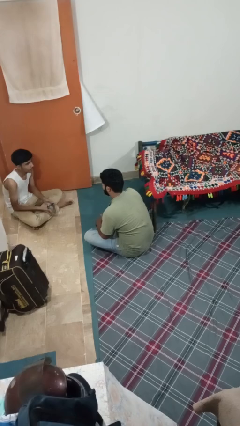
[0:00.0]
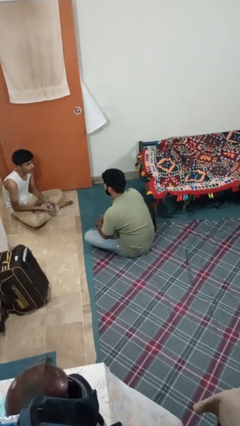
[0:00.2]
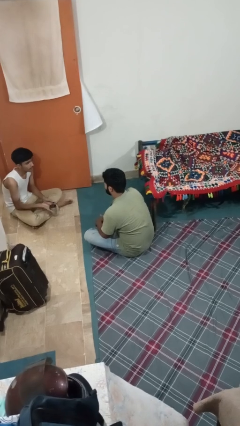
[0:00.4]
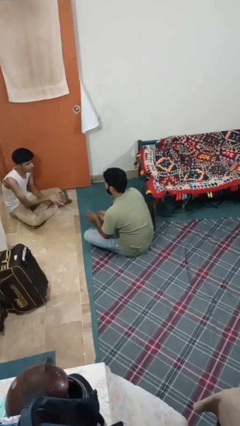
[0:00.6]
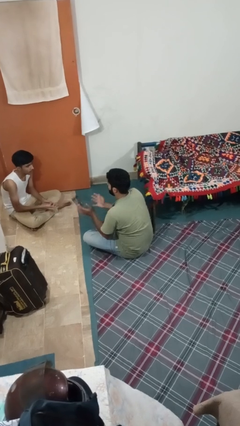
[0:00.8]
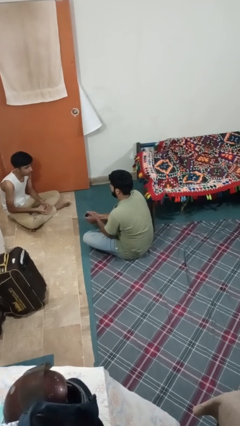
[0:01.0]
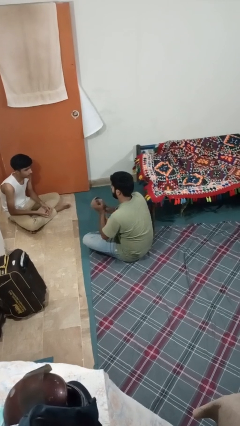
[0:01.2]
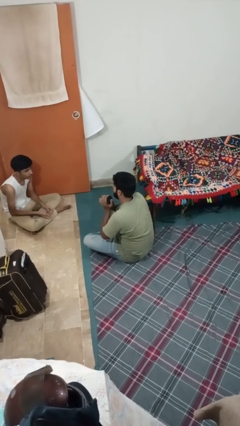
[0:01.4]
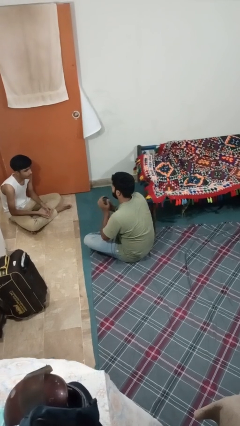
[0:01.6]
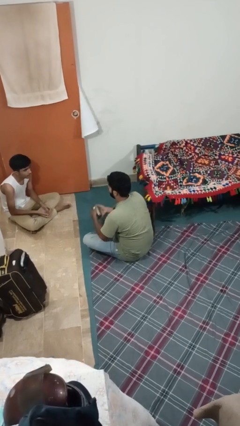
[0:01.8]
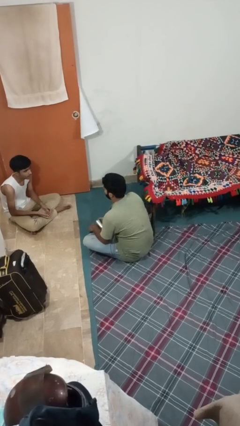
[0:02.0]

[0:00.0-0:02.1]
person catches object from person

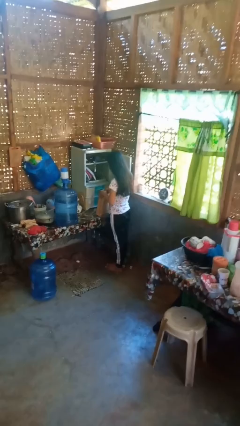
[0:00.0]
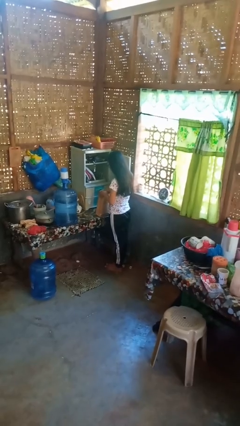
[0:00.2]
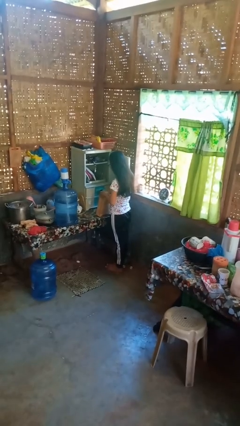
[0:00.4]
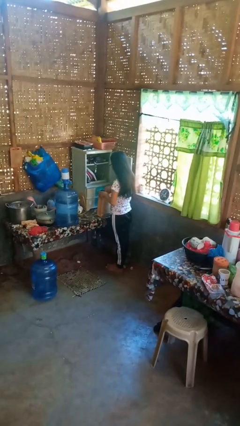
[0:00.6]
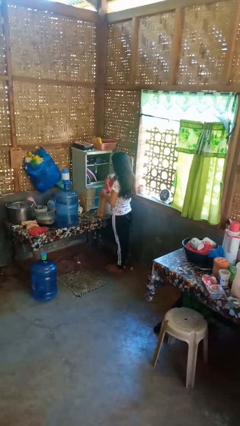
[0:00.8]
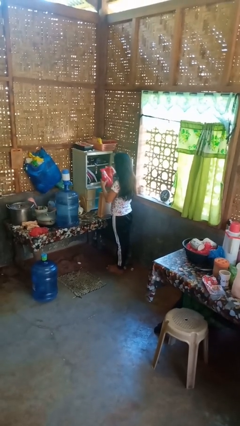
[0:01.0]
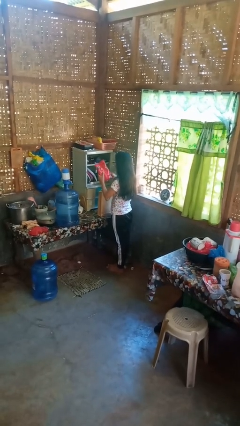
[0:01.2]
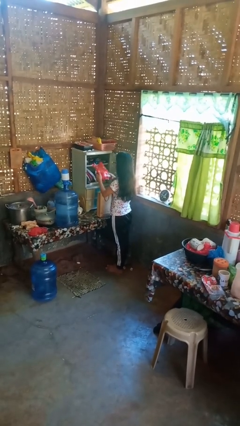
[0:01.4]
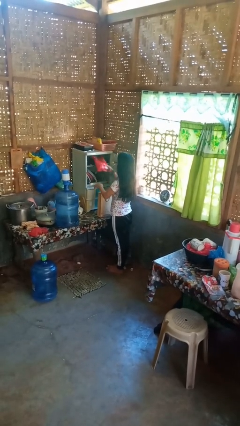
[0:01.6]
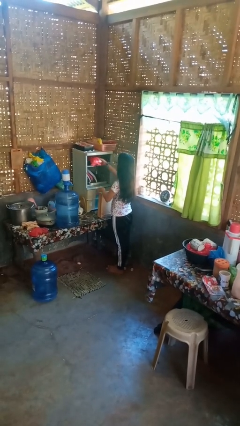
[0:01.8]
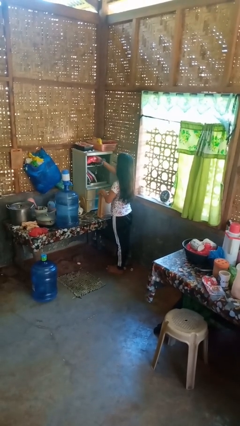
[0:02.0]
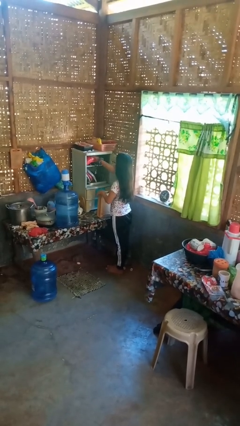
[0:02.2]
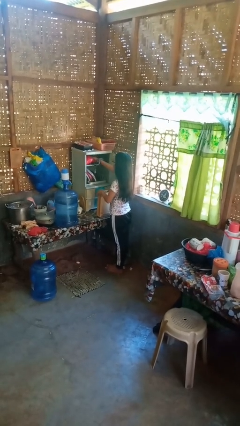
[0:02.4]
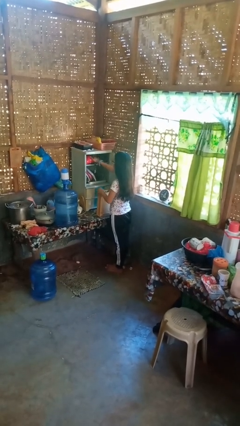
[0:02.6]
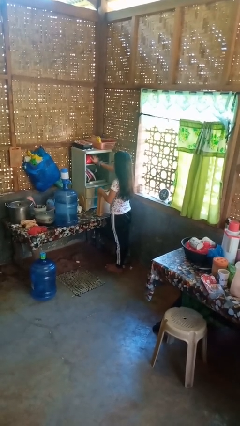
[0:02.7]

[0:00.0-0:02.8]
person loads groceries into cabinet

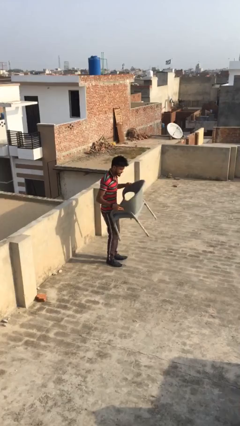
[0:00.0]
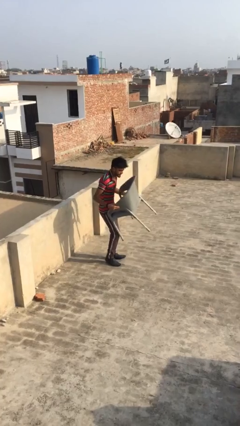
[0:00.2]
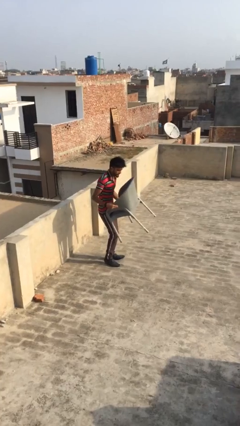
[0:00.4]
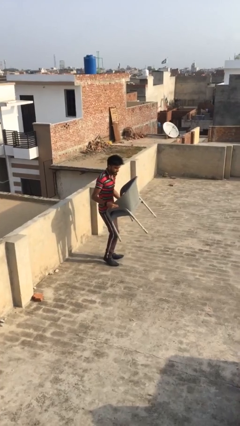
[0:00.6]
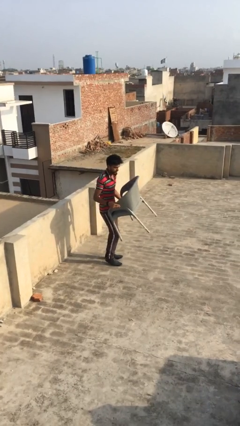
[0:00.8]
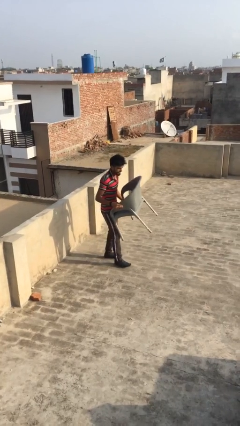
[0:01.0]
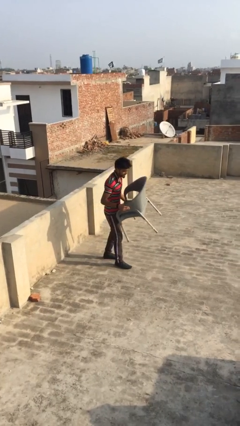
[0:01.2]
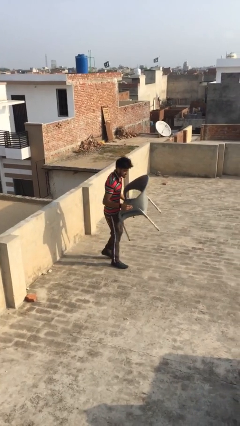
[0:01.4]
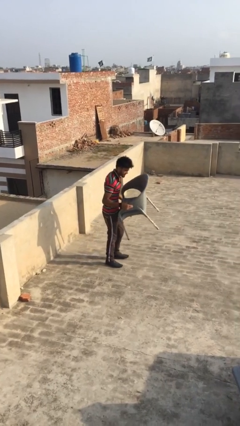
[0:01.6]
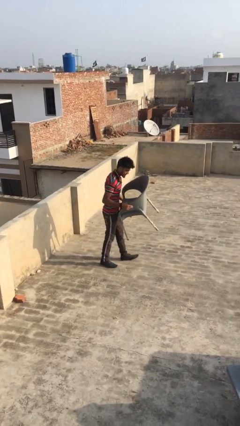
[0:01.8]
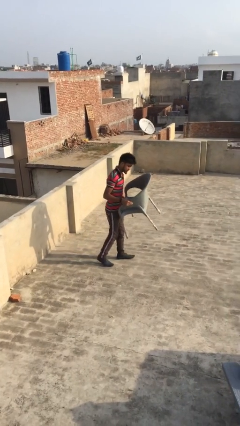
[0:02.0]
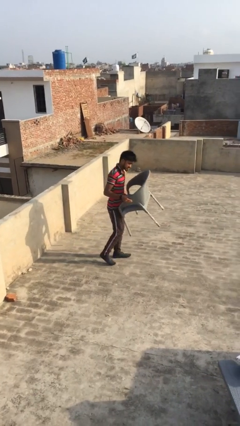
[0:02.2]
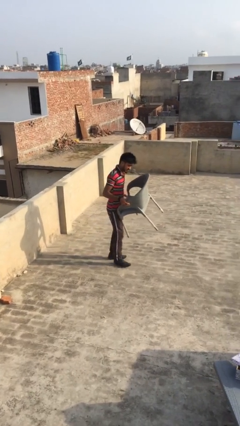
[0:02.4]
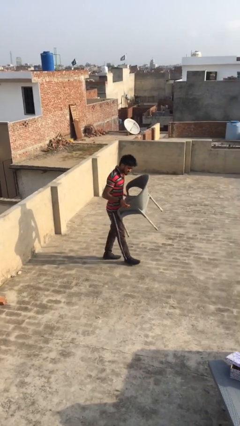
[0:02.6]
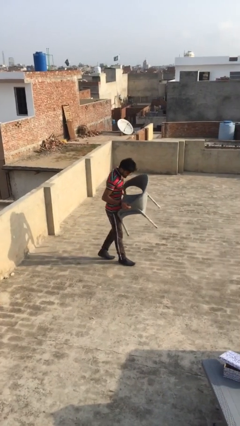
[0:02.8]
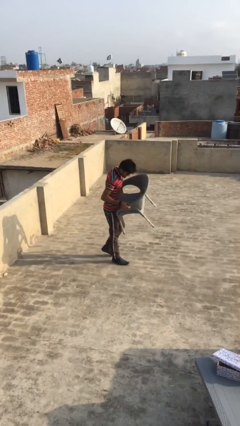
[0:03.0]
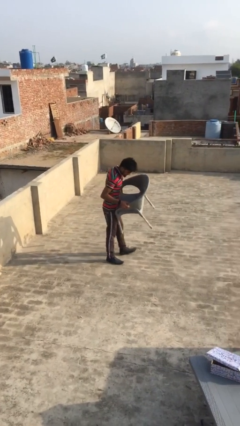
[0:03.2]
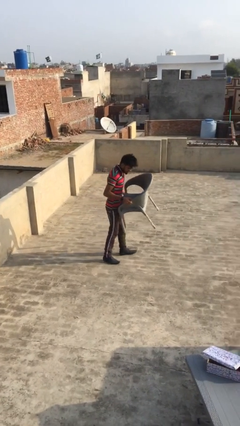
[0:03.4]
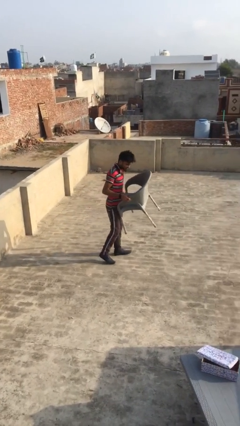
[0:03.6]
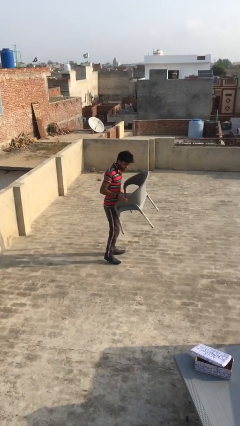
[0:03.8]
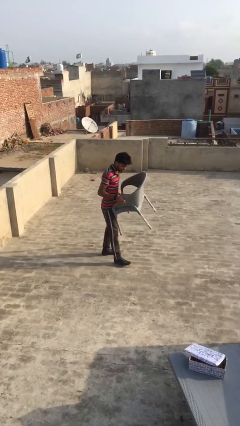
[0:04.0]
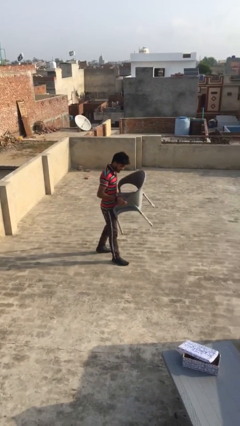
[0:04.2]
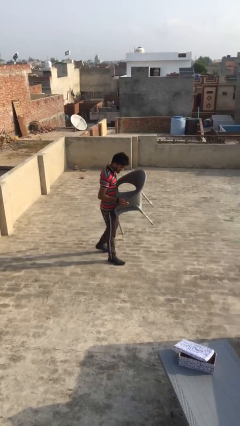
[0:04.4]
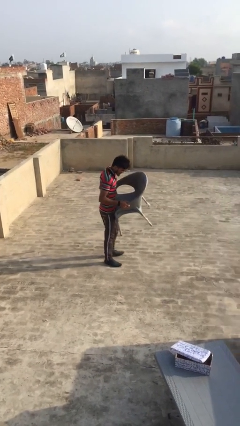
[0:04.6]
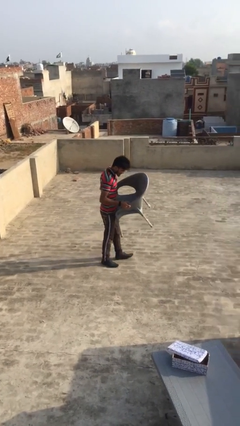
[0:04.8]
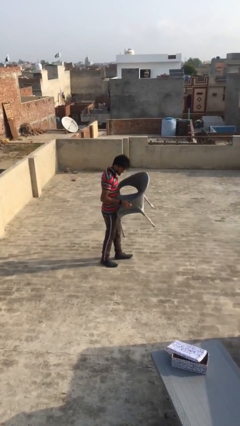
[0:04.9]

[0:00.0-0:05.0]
person carries heavy object

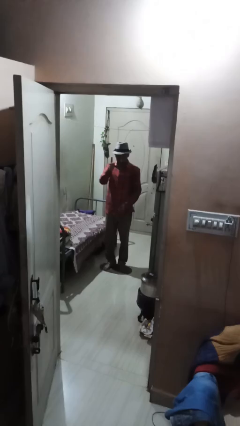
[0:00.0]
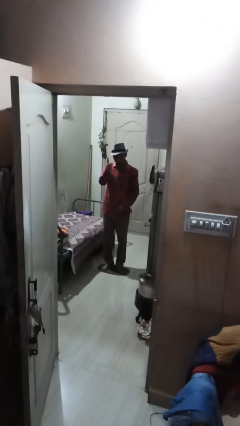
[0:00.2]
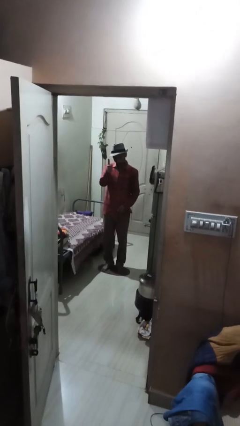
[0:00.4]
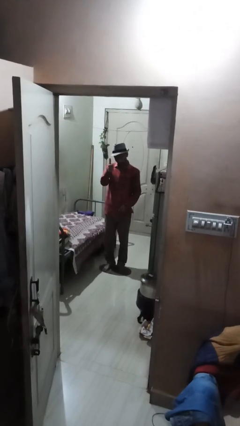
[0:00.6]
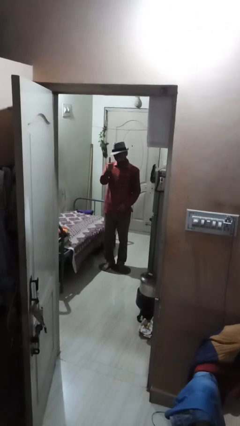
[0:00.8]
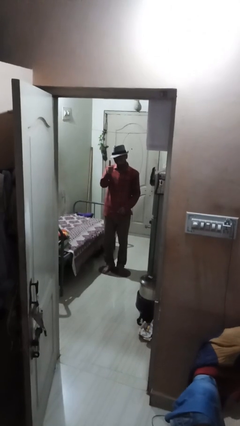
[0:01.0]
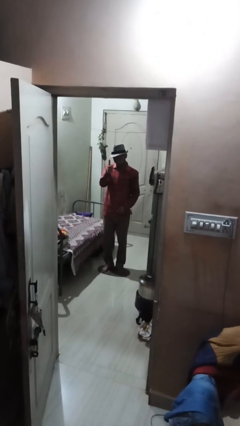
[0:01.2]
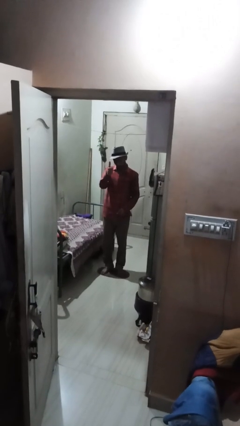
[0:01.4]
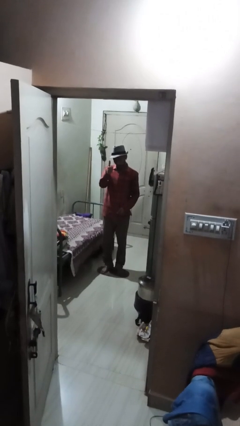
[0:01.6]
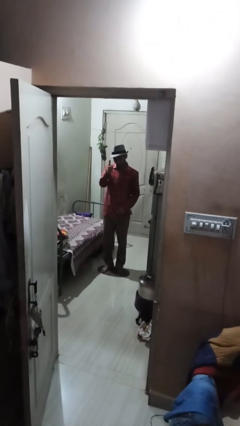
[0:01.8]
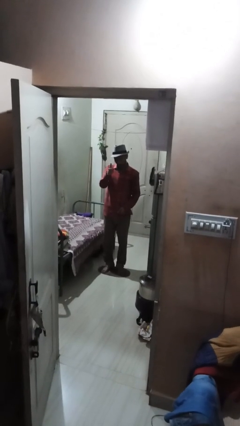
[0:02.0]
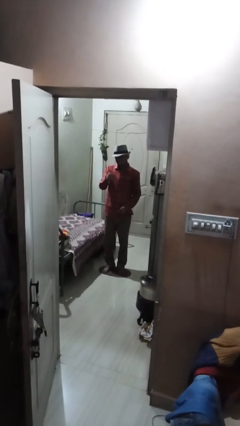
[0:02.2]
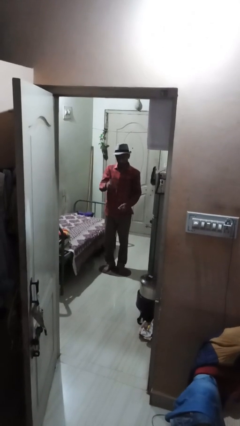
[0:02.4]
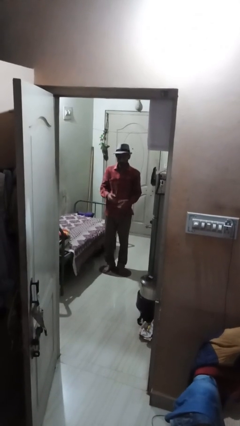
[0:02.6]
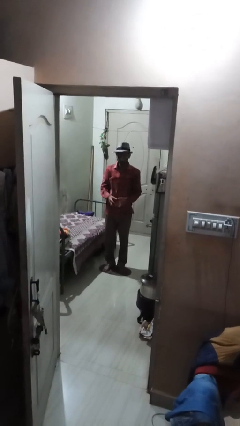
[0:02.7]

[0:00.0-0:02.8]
person gestures thumbs up

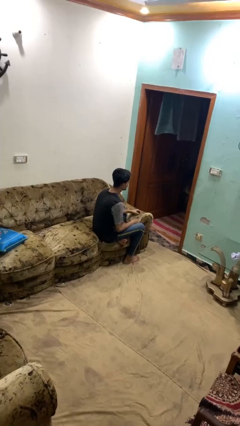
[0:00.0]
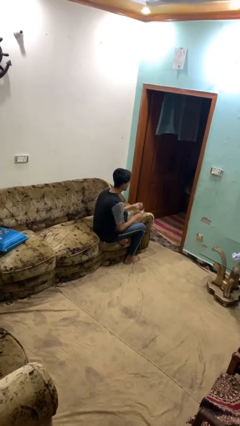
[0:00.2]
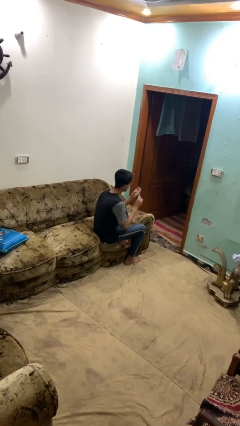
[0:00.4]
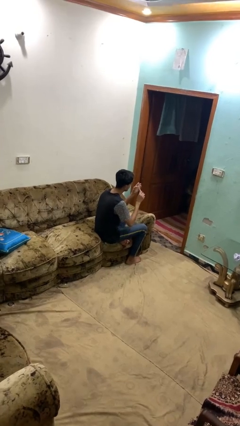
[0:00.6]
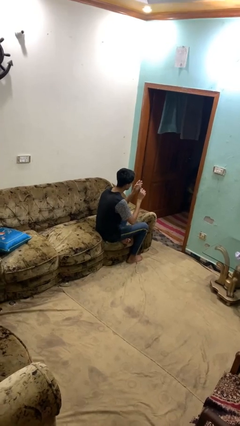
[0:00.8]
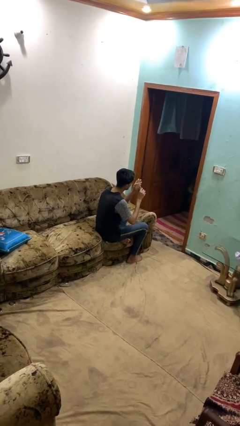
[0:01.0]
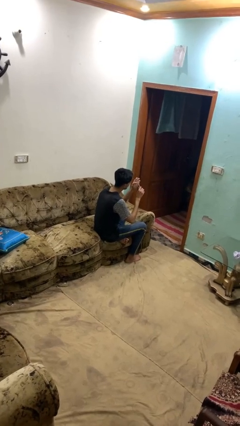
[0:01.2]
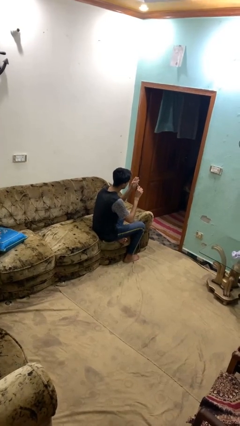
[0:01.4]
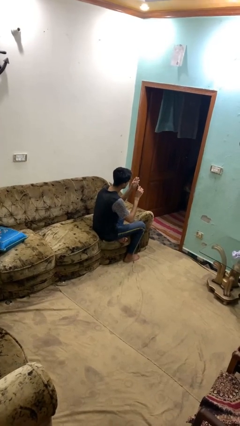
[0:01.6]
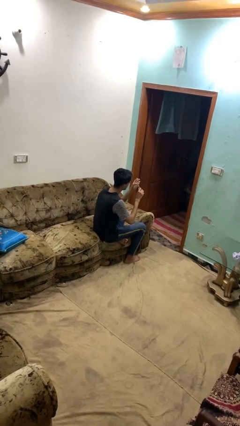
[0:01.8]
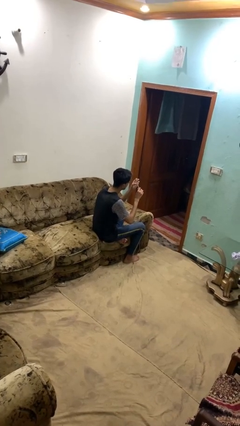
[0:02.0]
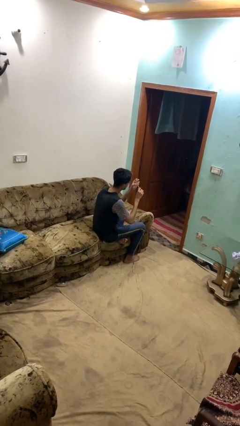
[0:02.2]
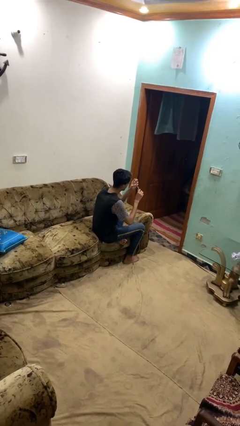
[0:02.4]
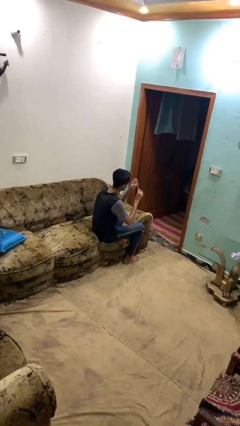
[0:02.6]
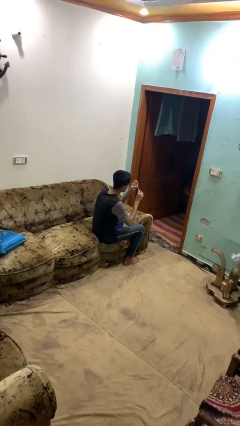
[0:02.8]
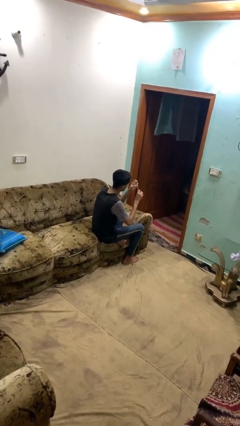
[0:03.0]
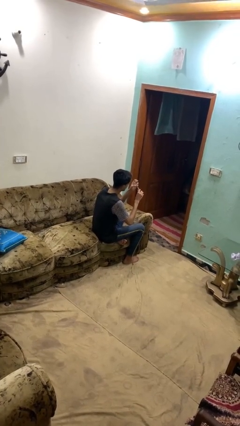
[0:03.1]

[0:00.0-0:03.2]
person files fingernails

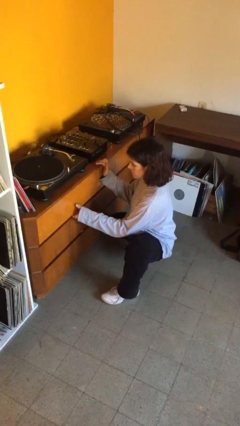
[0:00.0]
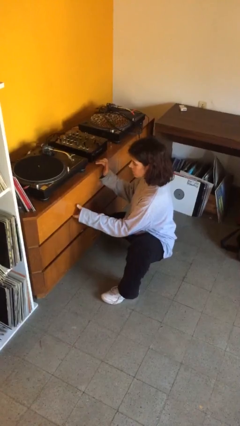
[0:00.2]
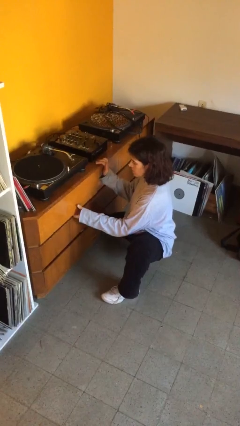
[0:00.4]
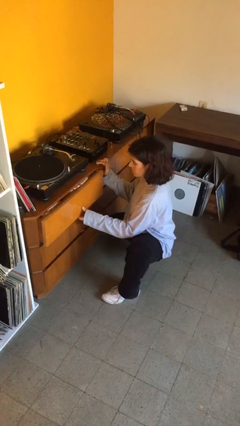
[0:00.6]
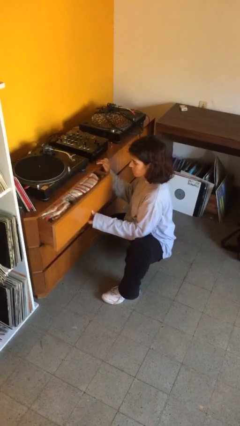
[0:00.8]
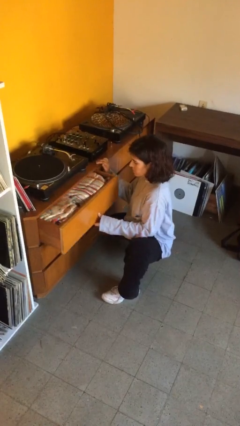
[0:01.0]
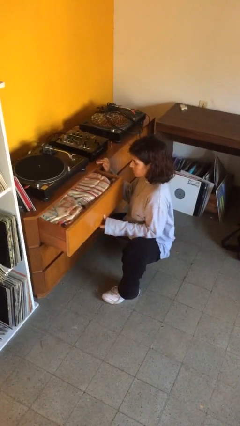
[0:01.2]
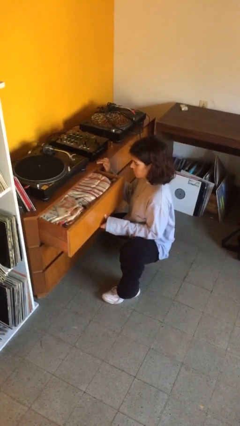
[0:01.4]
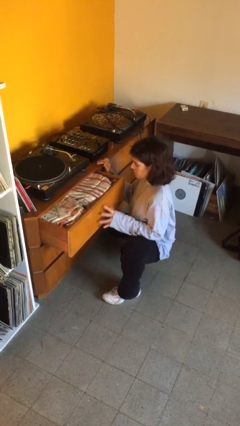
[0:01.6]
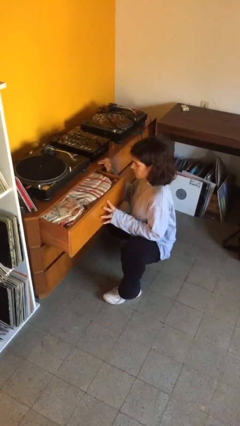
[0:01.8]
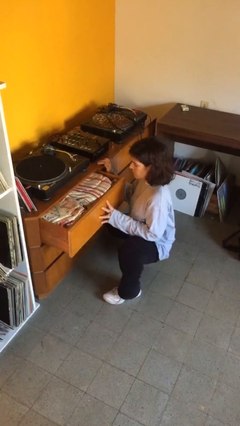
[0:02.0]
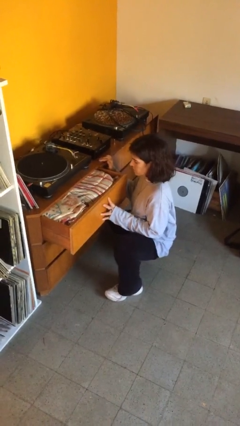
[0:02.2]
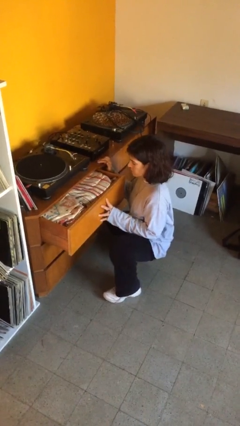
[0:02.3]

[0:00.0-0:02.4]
person opens dresser drawer
